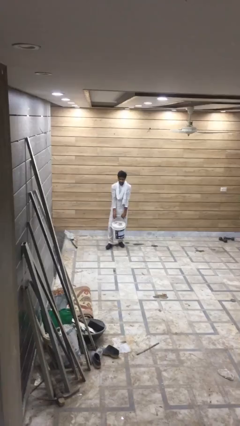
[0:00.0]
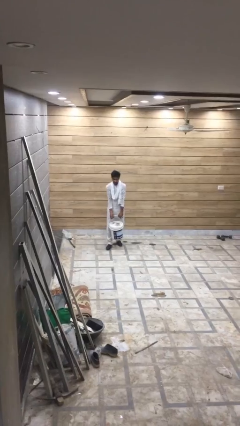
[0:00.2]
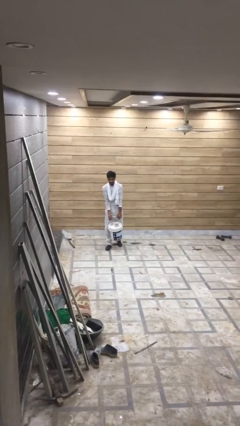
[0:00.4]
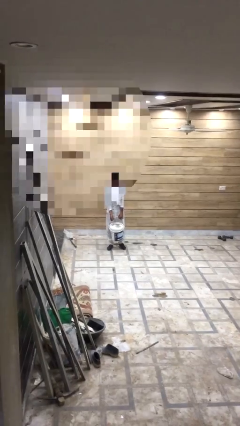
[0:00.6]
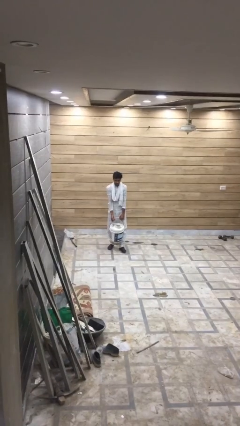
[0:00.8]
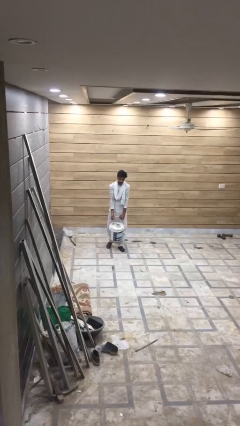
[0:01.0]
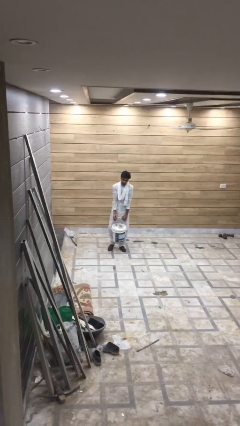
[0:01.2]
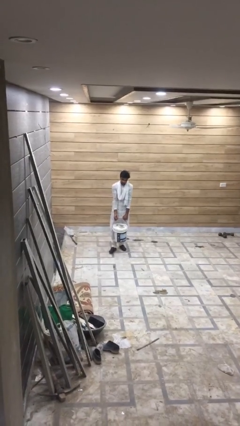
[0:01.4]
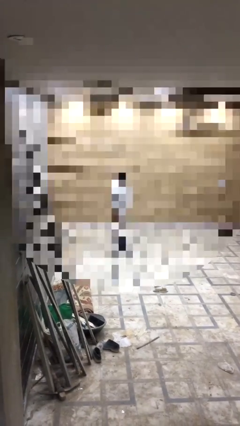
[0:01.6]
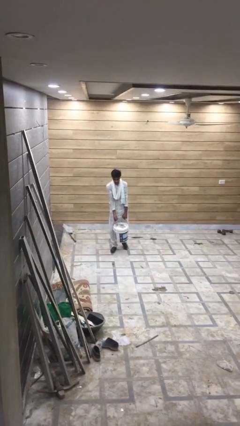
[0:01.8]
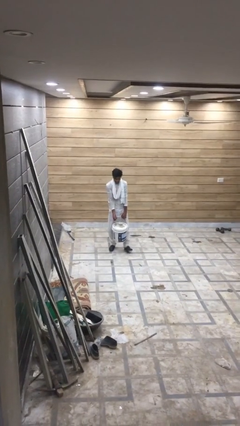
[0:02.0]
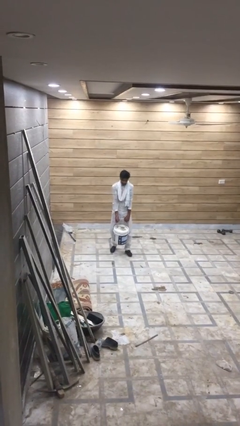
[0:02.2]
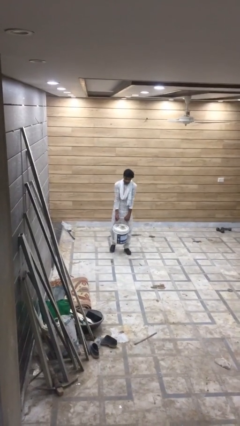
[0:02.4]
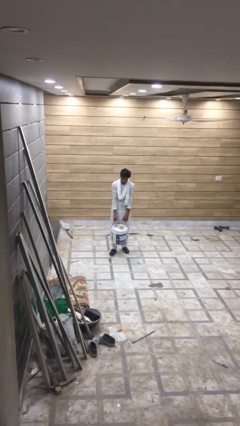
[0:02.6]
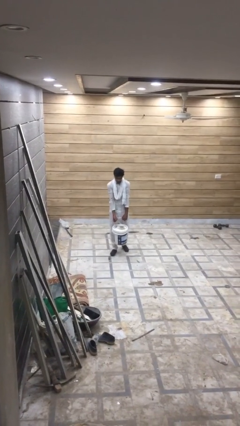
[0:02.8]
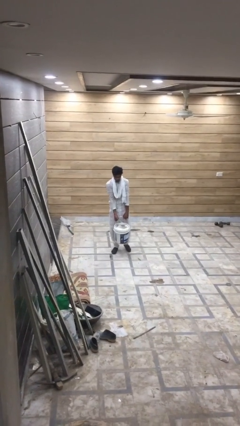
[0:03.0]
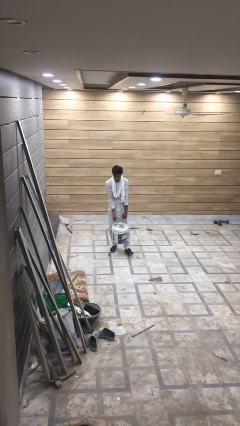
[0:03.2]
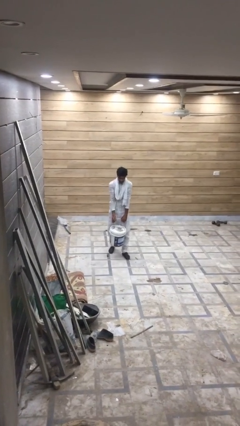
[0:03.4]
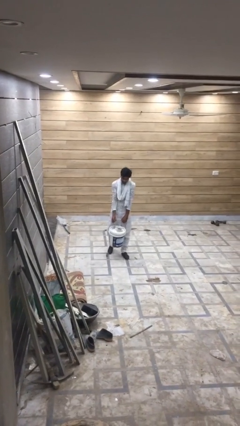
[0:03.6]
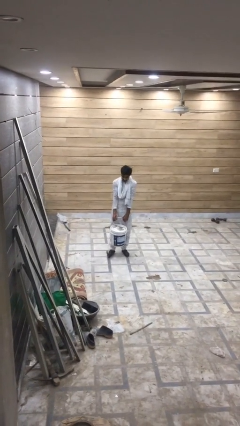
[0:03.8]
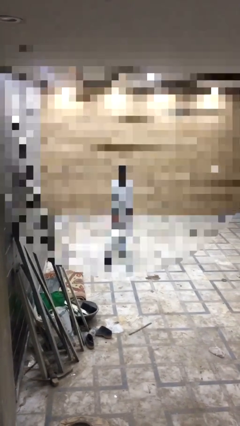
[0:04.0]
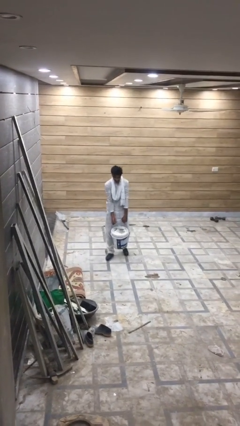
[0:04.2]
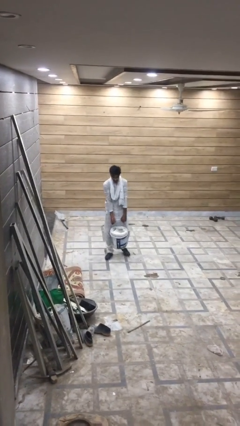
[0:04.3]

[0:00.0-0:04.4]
person carries heavy object

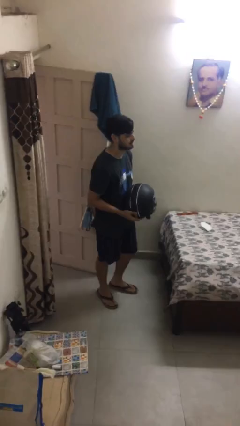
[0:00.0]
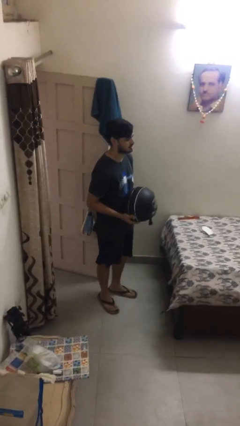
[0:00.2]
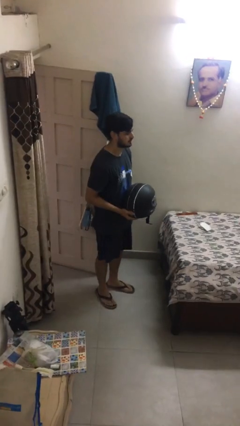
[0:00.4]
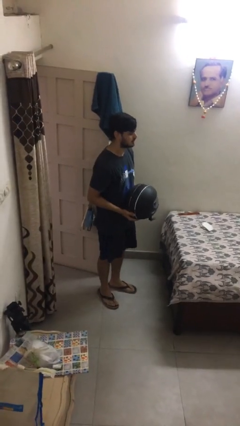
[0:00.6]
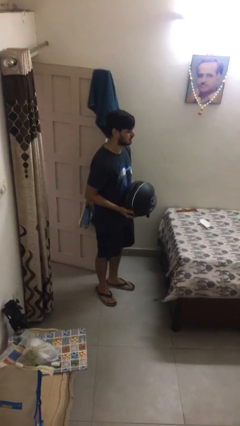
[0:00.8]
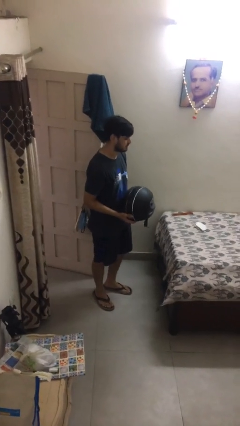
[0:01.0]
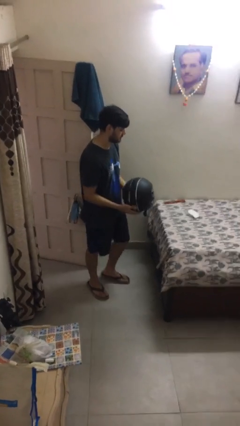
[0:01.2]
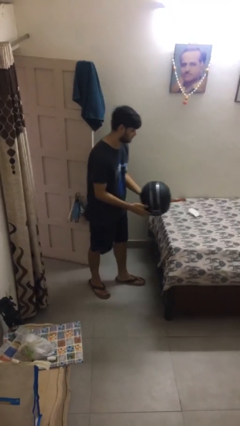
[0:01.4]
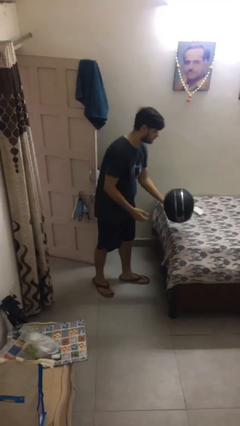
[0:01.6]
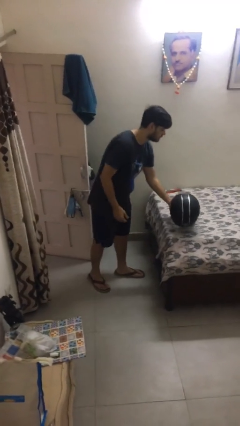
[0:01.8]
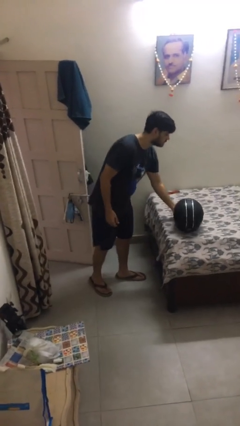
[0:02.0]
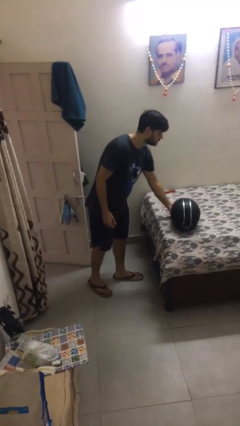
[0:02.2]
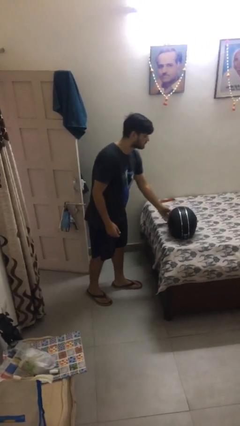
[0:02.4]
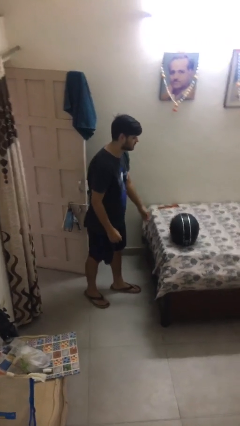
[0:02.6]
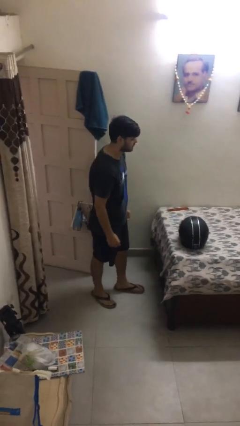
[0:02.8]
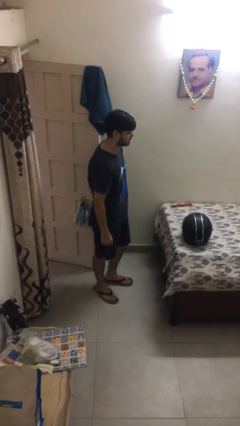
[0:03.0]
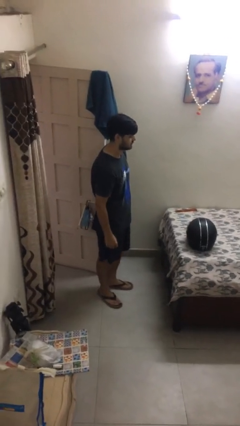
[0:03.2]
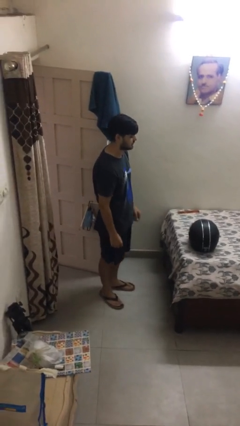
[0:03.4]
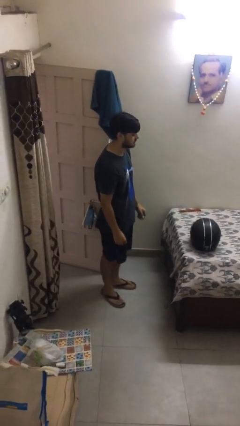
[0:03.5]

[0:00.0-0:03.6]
person puts down object on bed

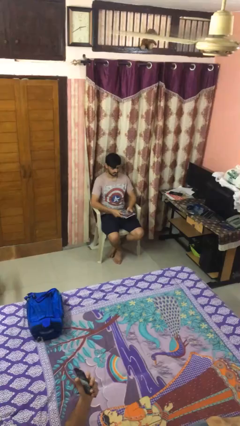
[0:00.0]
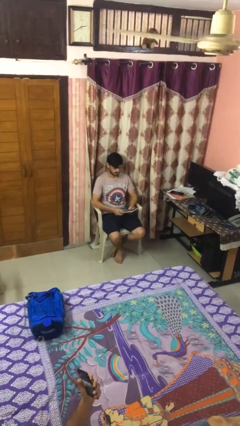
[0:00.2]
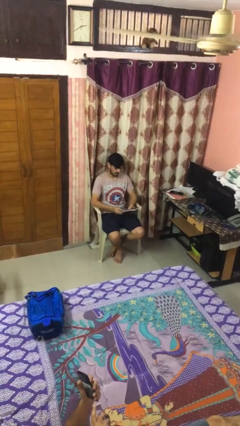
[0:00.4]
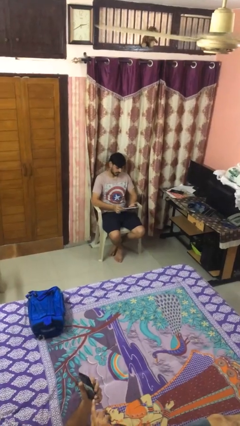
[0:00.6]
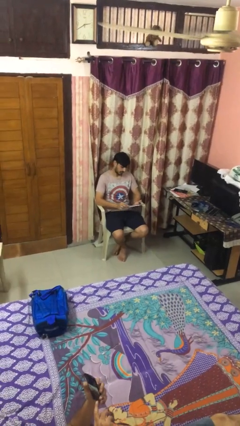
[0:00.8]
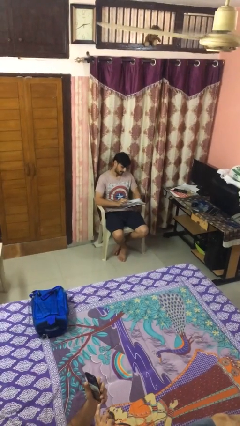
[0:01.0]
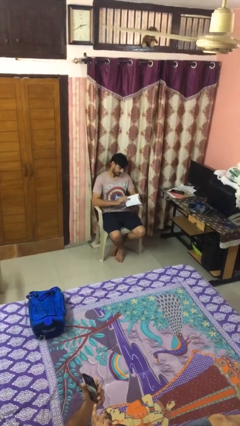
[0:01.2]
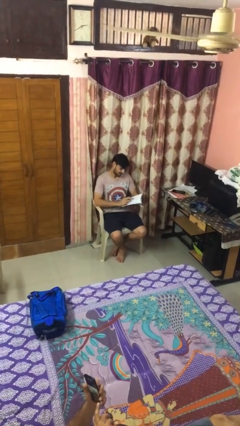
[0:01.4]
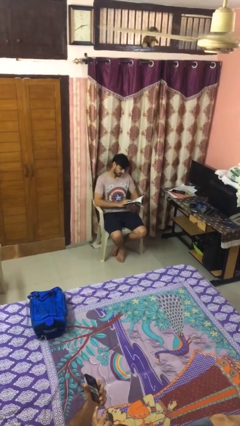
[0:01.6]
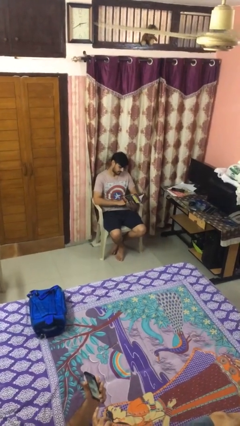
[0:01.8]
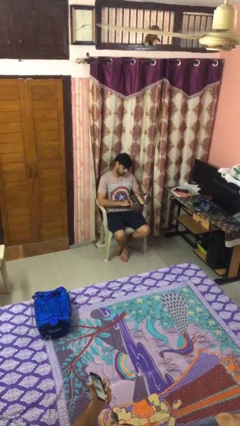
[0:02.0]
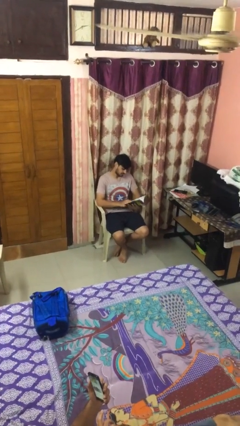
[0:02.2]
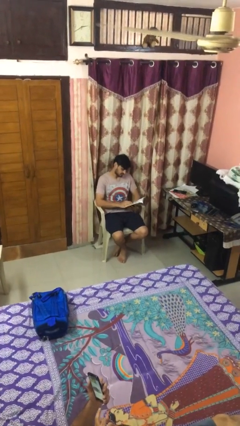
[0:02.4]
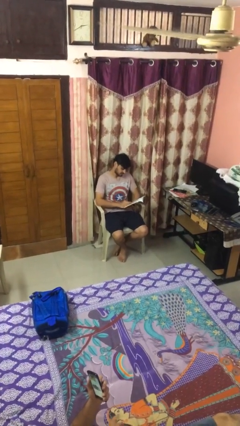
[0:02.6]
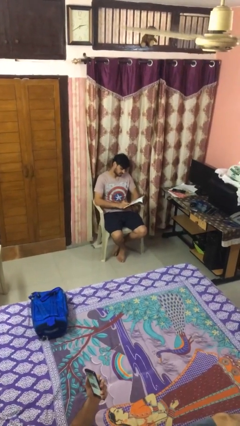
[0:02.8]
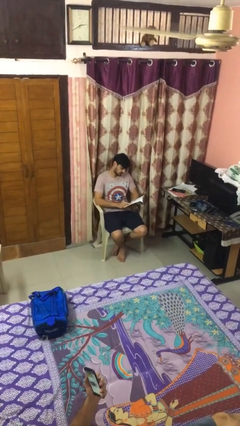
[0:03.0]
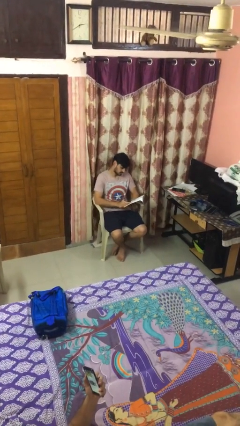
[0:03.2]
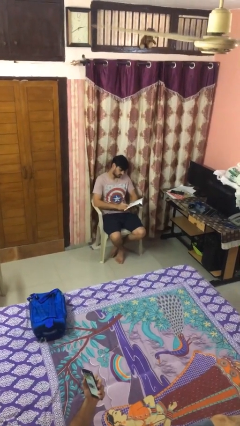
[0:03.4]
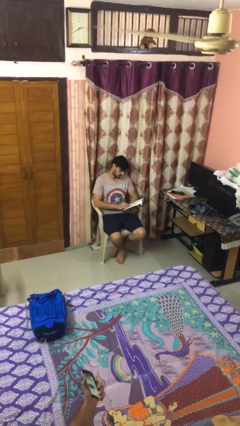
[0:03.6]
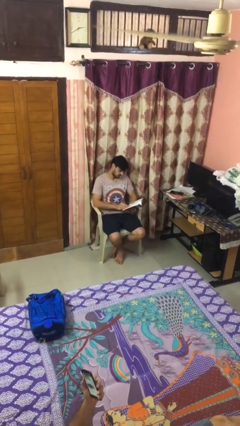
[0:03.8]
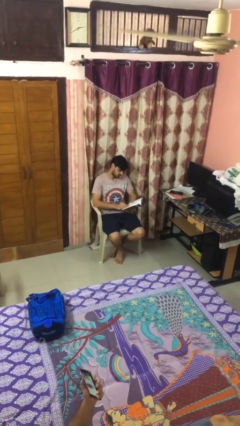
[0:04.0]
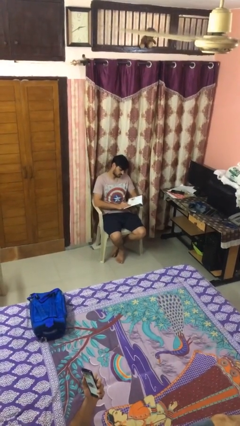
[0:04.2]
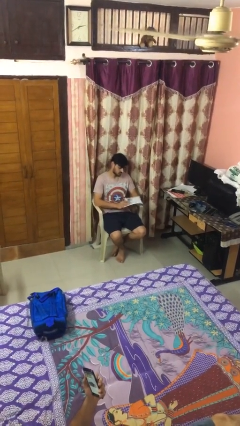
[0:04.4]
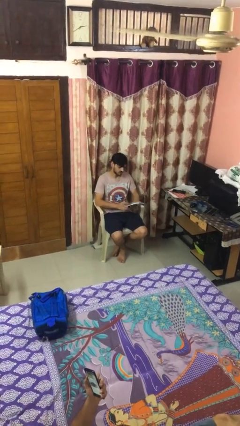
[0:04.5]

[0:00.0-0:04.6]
person reads book

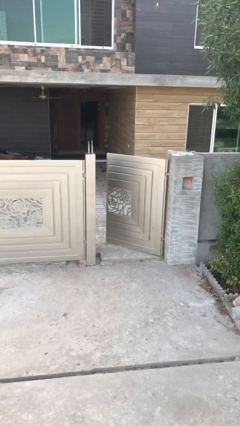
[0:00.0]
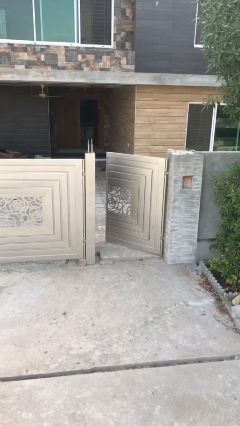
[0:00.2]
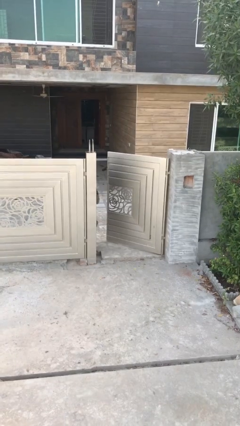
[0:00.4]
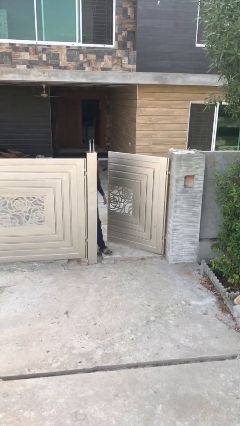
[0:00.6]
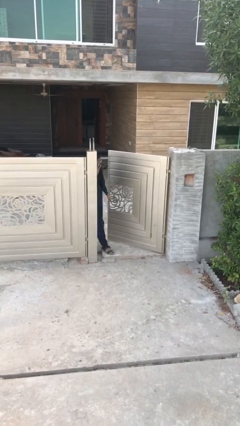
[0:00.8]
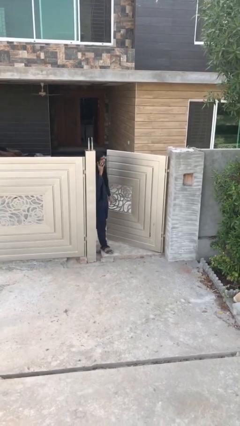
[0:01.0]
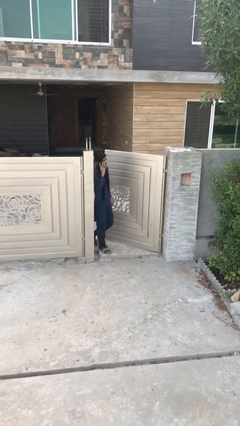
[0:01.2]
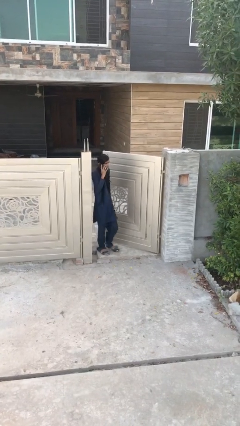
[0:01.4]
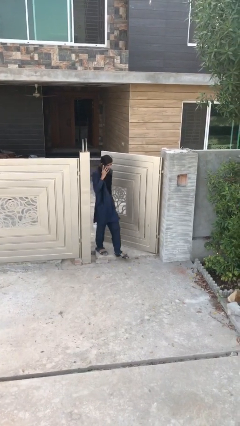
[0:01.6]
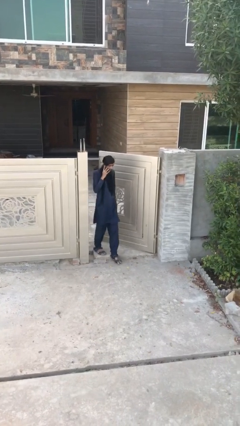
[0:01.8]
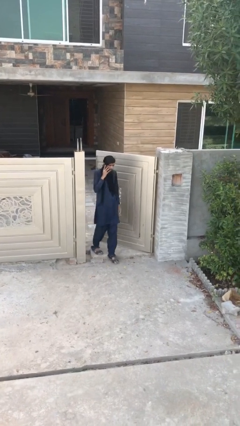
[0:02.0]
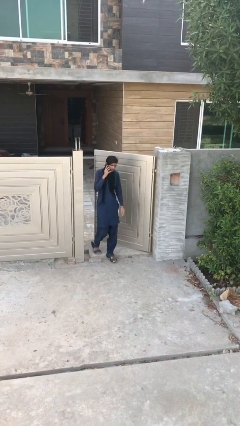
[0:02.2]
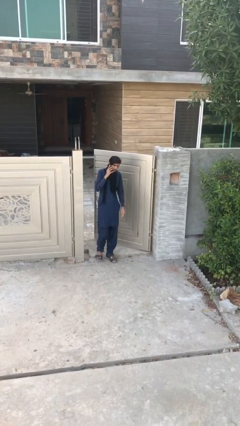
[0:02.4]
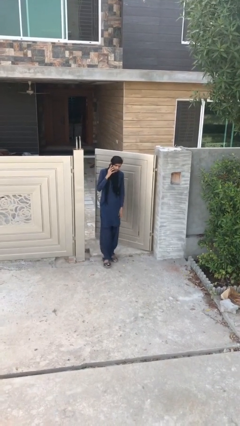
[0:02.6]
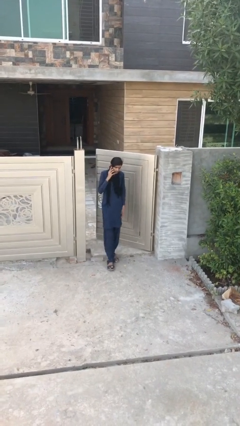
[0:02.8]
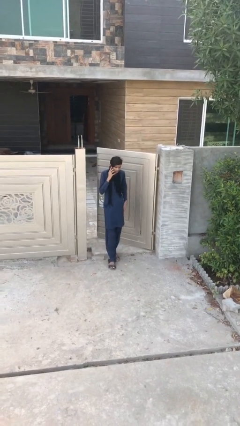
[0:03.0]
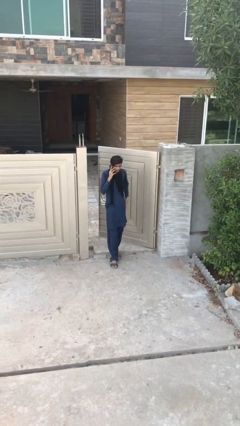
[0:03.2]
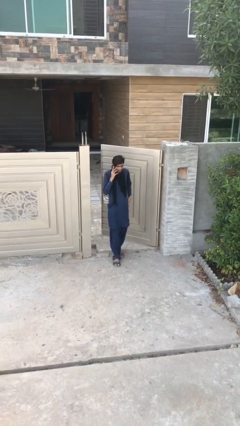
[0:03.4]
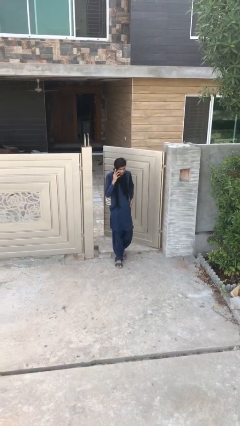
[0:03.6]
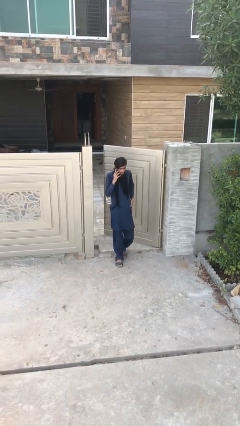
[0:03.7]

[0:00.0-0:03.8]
person enters scene through structure

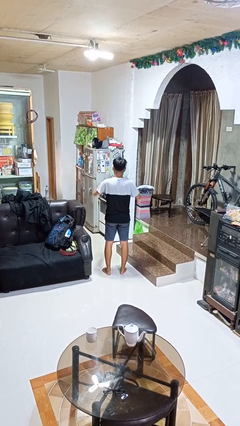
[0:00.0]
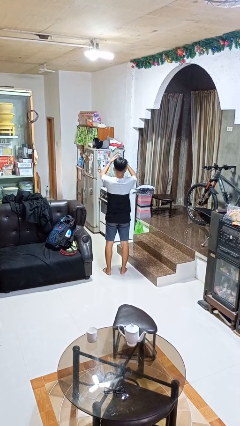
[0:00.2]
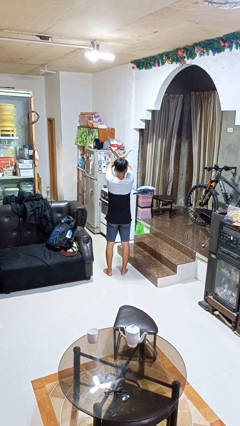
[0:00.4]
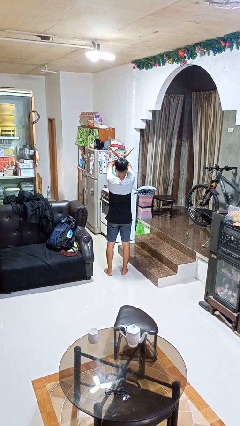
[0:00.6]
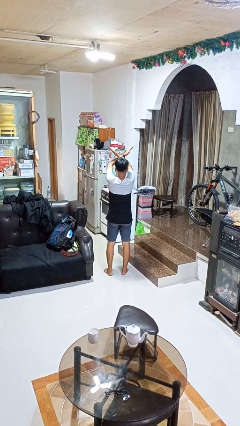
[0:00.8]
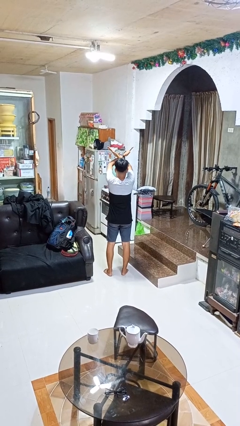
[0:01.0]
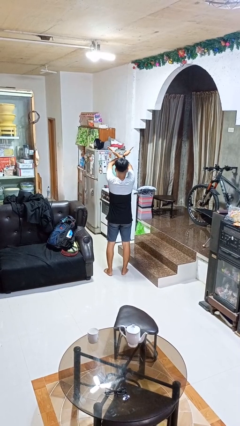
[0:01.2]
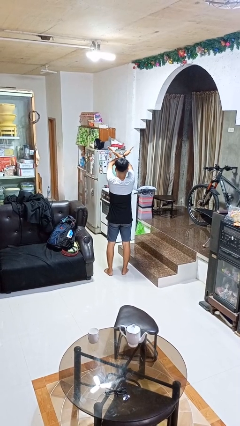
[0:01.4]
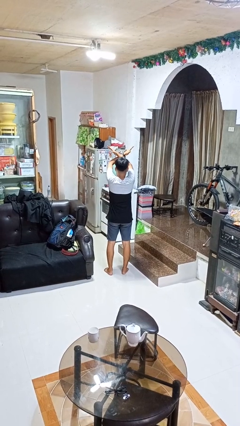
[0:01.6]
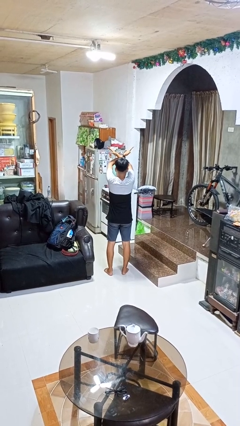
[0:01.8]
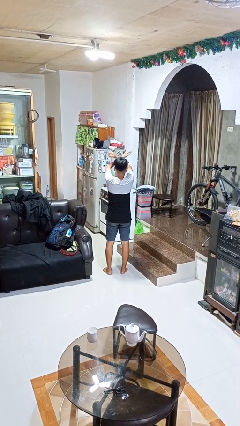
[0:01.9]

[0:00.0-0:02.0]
person gestures arms x
